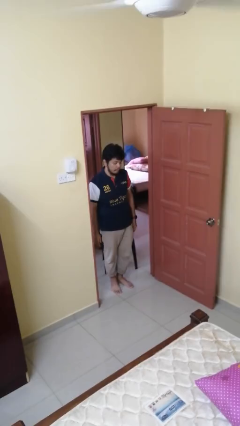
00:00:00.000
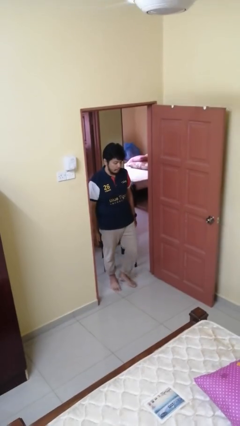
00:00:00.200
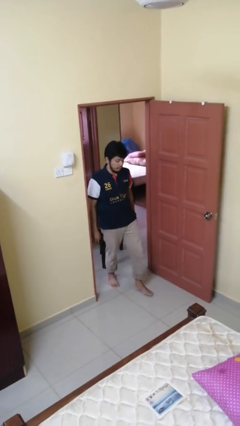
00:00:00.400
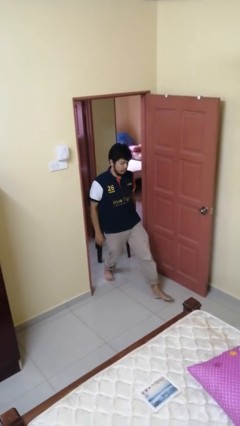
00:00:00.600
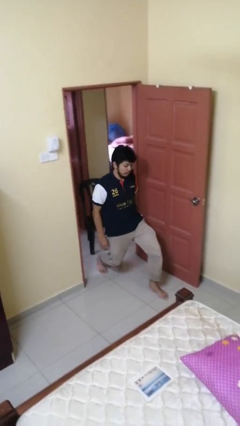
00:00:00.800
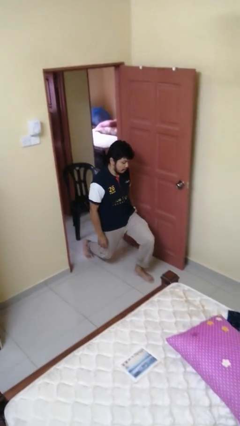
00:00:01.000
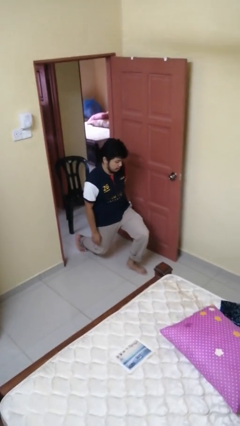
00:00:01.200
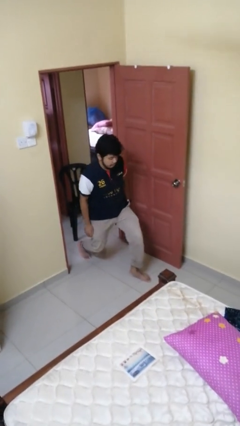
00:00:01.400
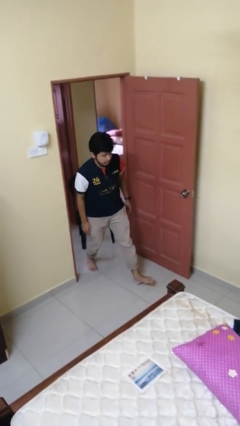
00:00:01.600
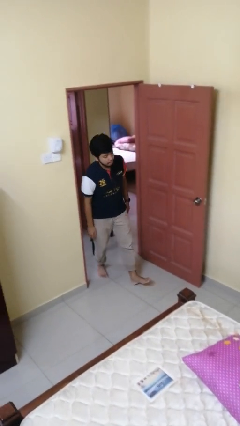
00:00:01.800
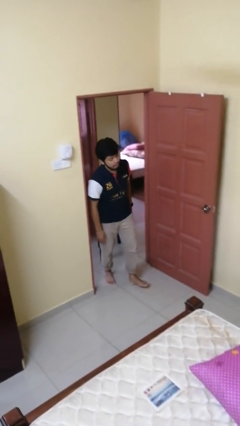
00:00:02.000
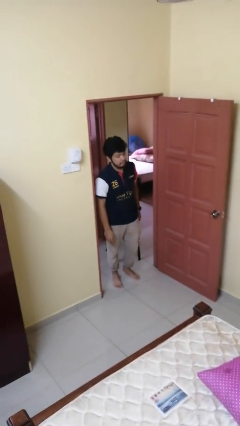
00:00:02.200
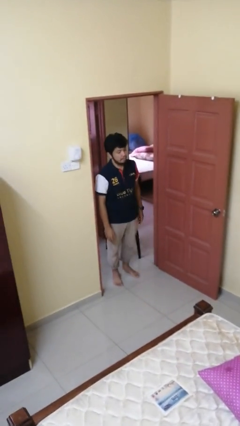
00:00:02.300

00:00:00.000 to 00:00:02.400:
person exercises with lunges

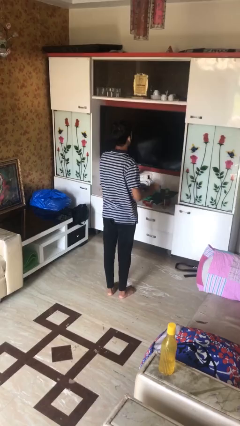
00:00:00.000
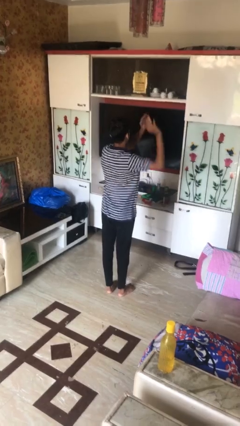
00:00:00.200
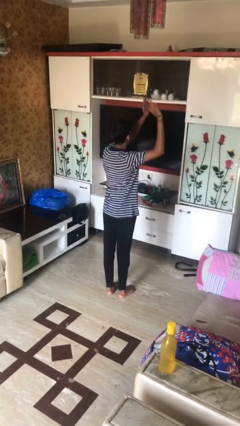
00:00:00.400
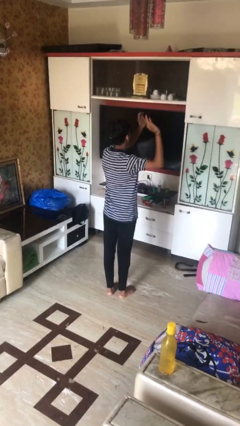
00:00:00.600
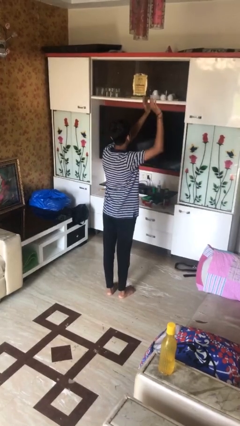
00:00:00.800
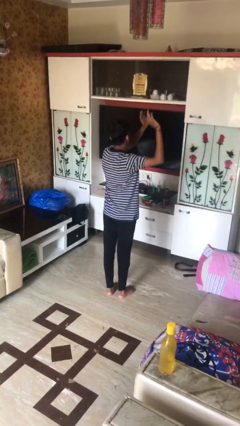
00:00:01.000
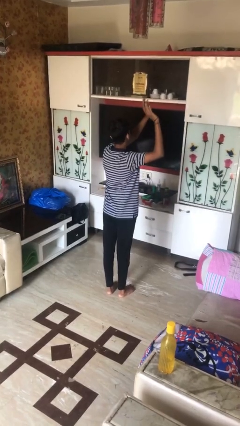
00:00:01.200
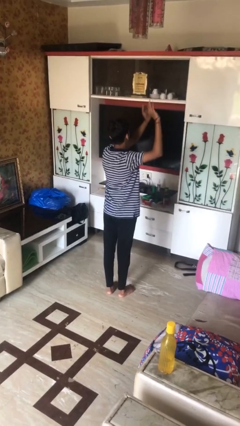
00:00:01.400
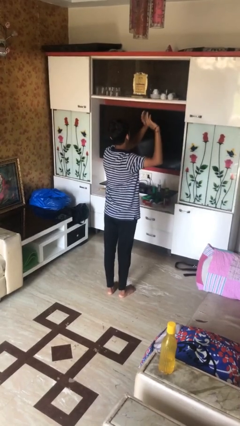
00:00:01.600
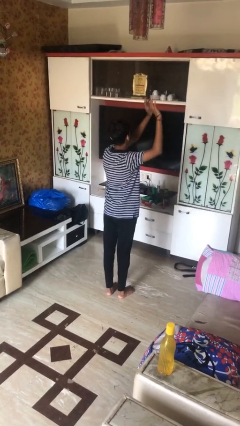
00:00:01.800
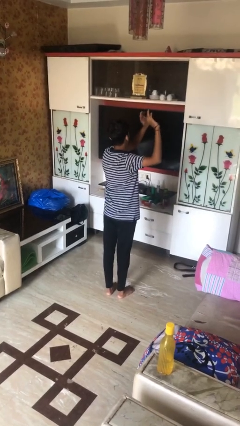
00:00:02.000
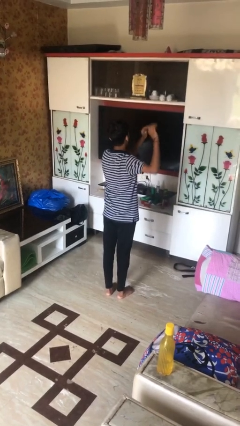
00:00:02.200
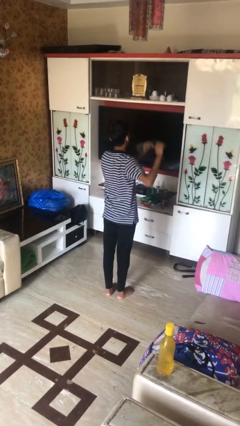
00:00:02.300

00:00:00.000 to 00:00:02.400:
person dances in place

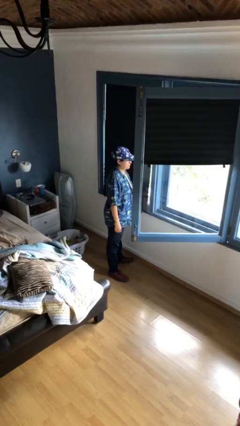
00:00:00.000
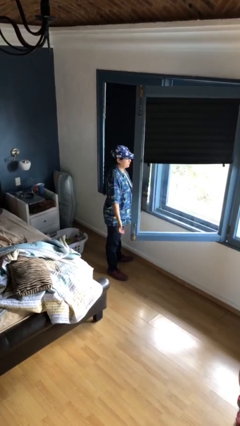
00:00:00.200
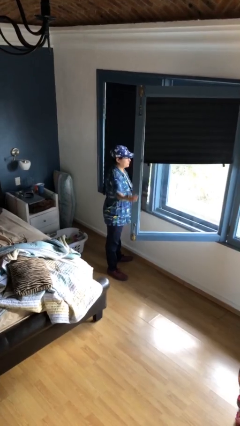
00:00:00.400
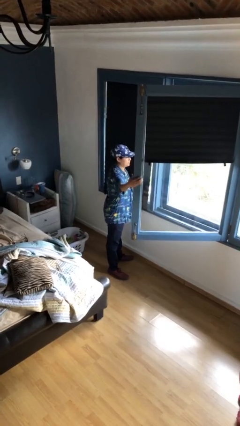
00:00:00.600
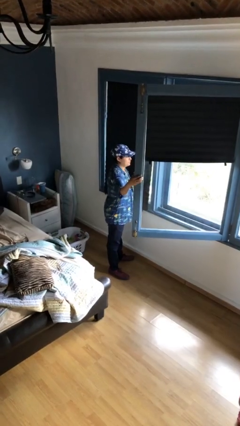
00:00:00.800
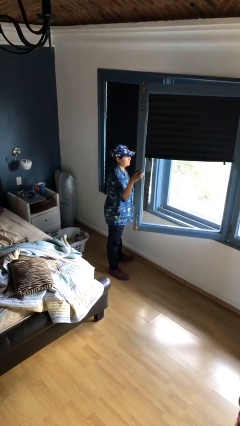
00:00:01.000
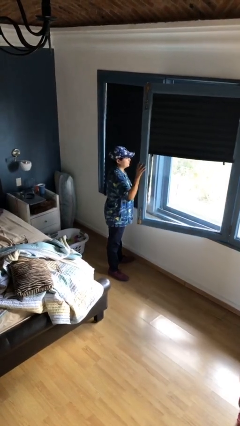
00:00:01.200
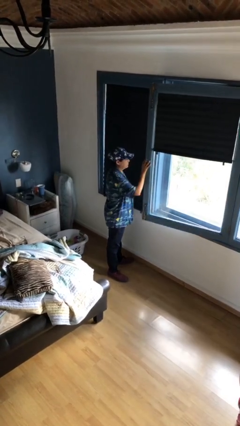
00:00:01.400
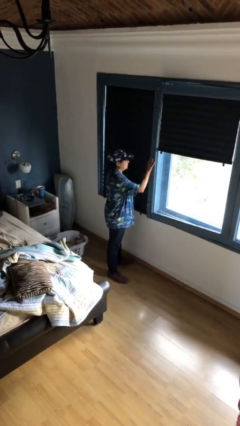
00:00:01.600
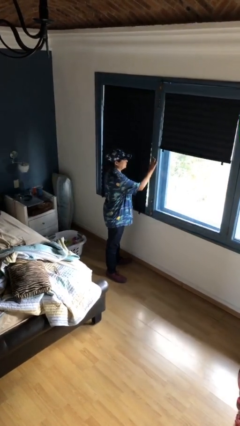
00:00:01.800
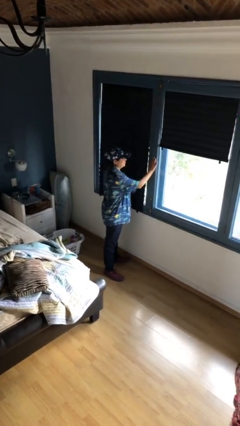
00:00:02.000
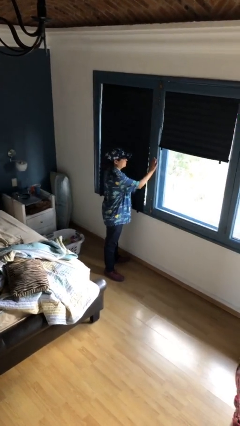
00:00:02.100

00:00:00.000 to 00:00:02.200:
person closes home window

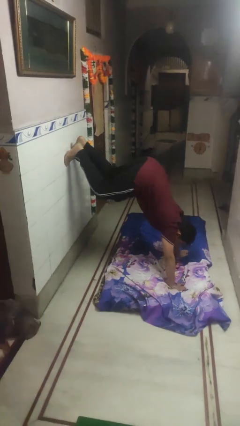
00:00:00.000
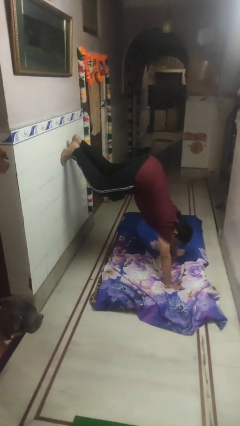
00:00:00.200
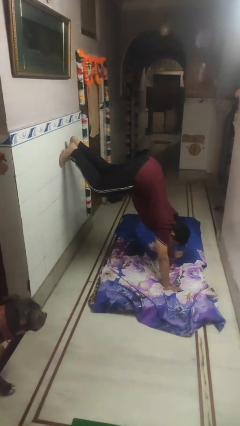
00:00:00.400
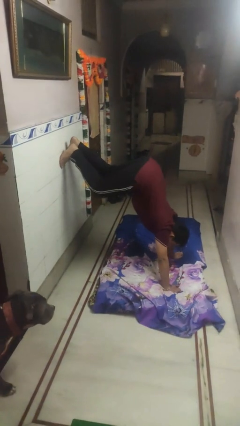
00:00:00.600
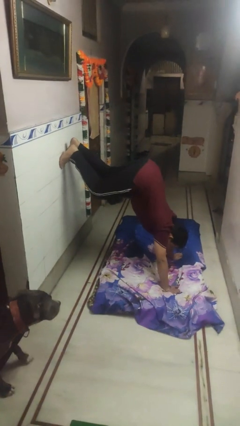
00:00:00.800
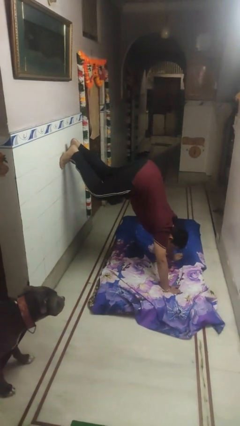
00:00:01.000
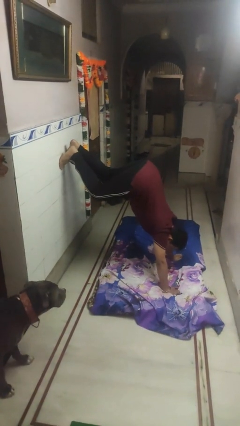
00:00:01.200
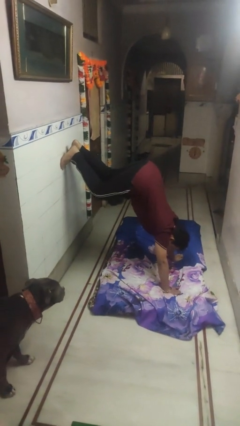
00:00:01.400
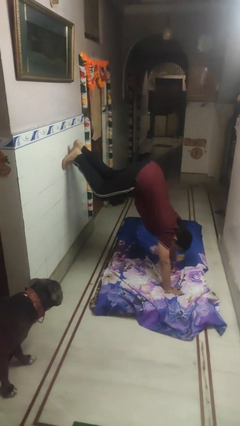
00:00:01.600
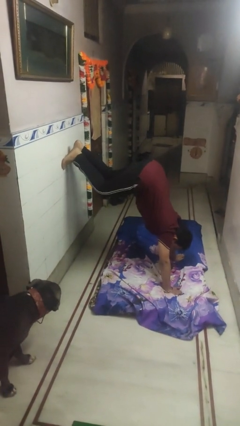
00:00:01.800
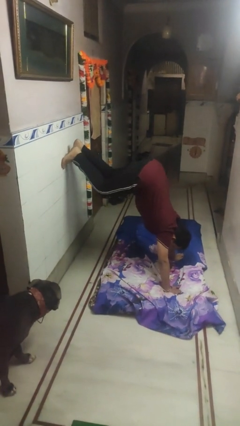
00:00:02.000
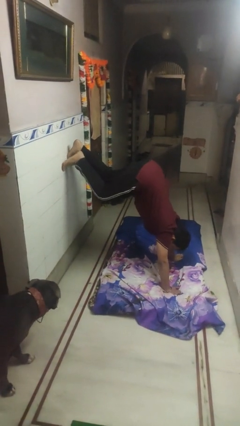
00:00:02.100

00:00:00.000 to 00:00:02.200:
person handstand

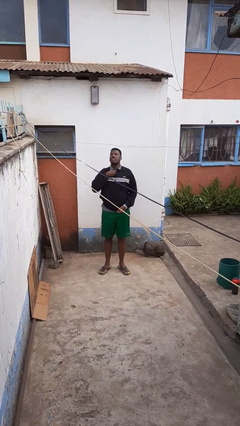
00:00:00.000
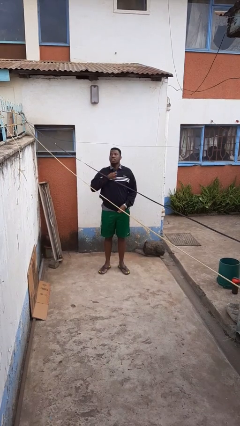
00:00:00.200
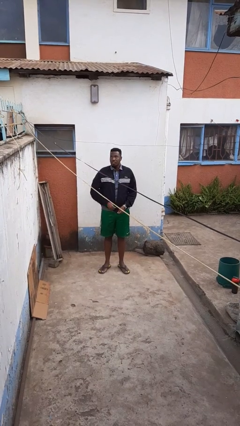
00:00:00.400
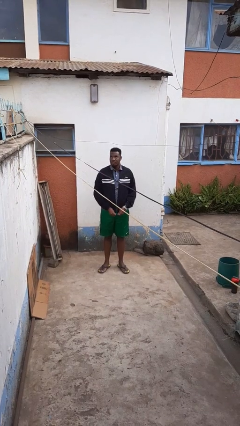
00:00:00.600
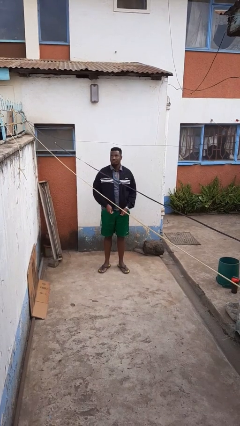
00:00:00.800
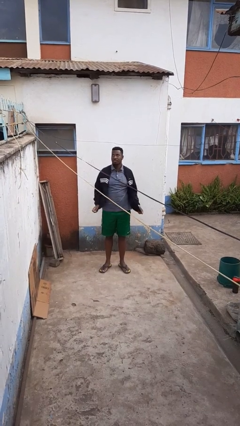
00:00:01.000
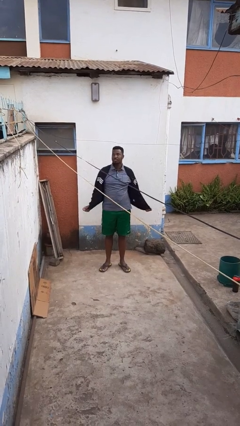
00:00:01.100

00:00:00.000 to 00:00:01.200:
person unzips jacket

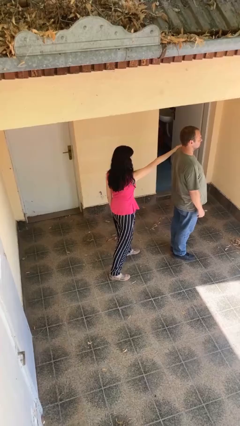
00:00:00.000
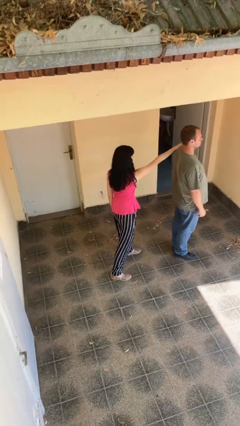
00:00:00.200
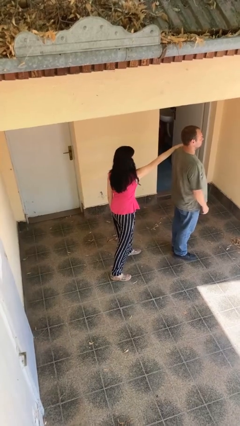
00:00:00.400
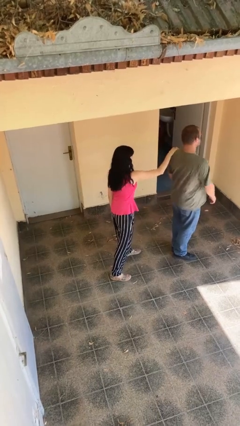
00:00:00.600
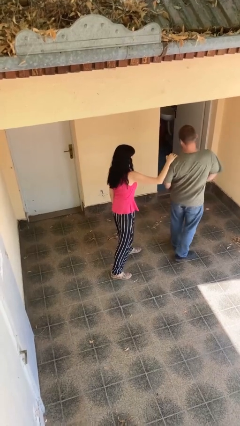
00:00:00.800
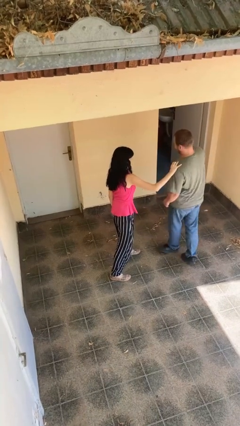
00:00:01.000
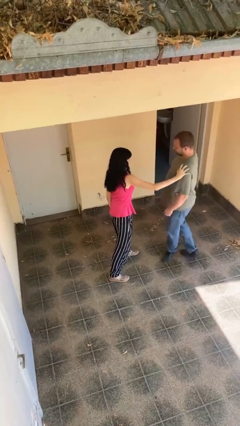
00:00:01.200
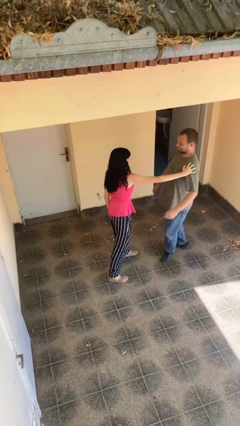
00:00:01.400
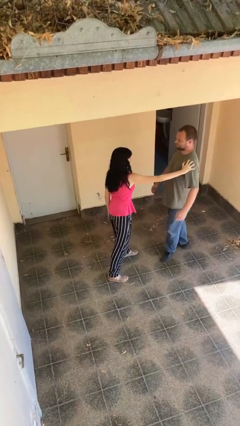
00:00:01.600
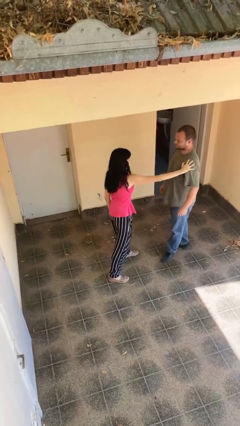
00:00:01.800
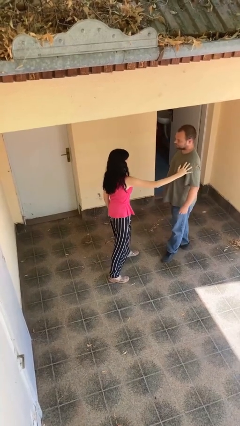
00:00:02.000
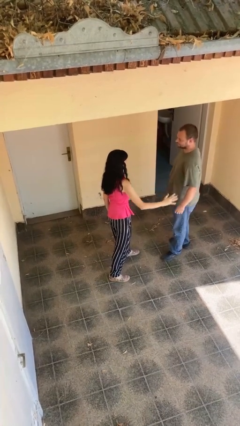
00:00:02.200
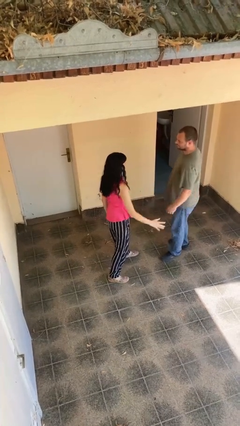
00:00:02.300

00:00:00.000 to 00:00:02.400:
person spins person around

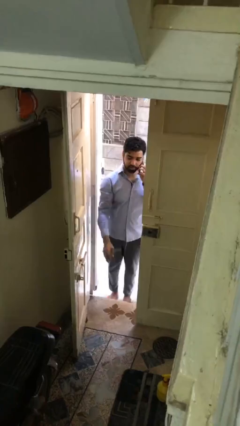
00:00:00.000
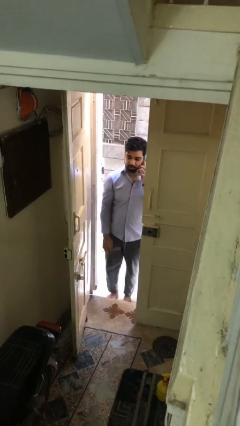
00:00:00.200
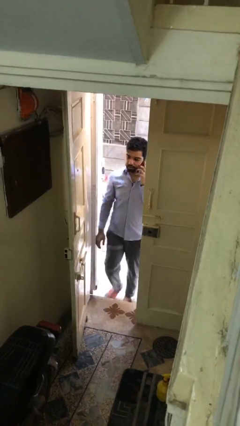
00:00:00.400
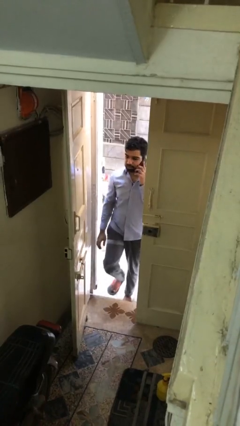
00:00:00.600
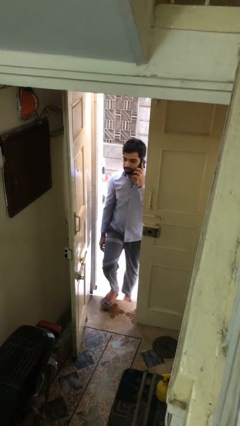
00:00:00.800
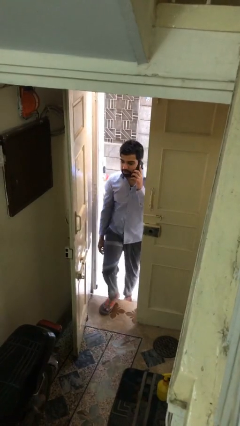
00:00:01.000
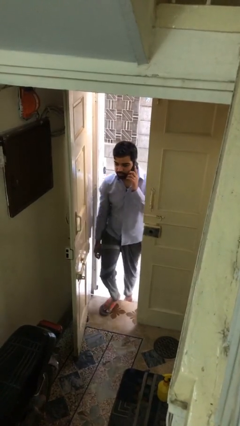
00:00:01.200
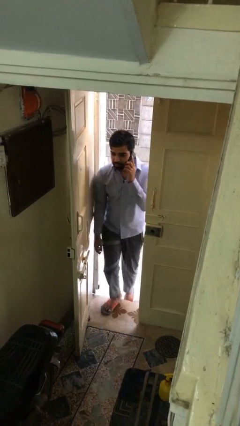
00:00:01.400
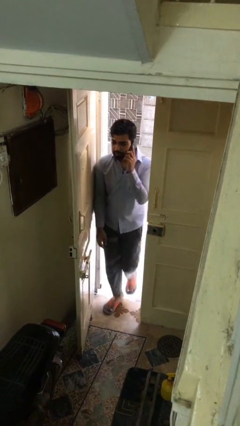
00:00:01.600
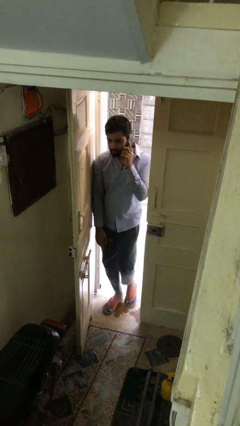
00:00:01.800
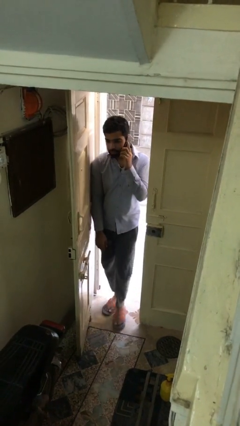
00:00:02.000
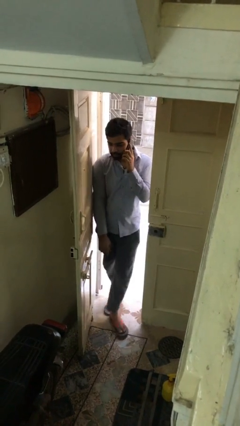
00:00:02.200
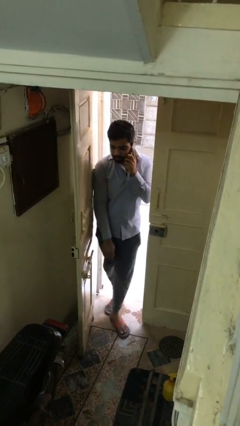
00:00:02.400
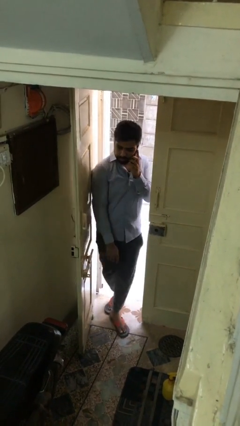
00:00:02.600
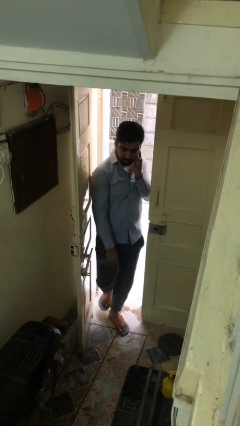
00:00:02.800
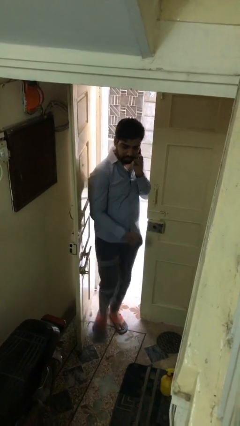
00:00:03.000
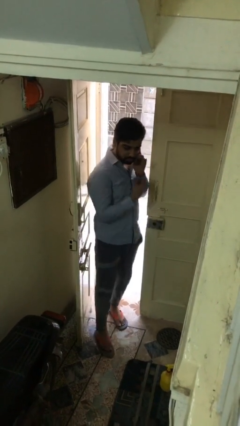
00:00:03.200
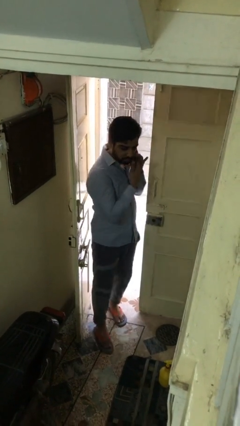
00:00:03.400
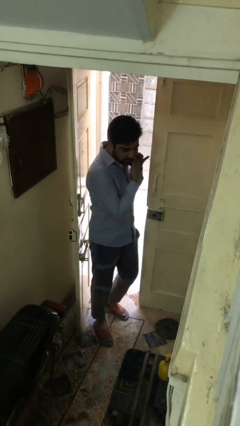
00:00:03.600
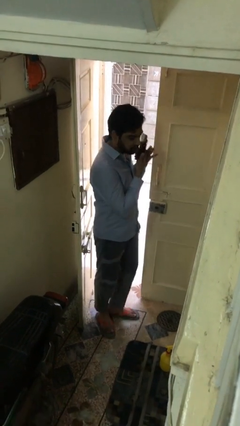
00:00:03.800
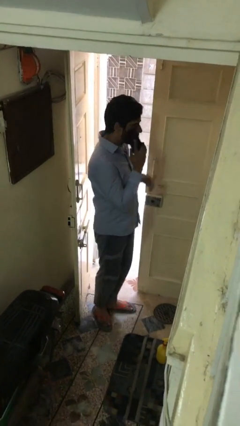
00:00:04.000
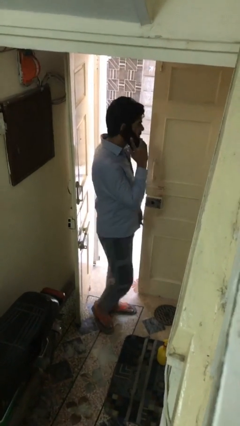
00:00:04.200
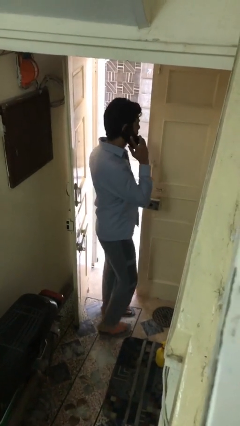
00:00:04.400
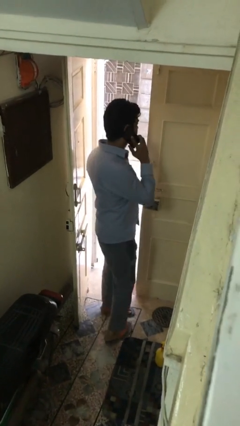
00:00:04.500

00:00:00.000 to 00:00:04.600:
person enters scene through structure
